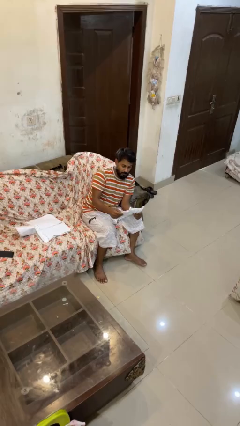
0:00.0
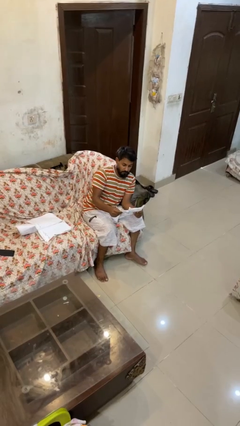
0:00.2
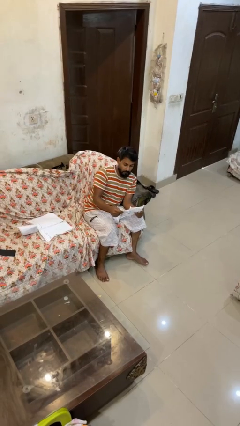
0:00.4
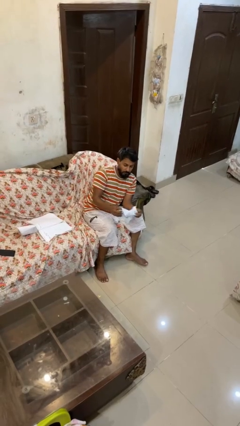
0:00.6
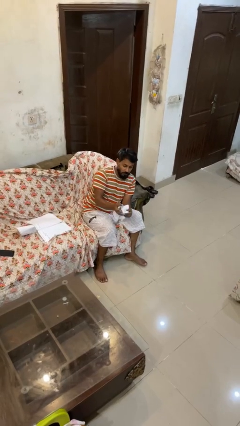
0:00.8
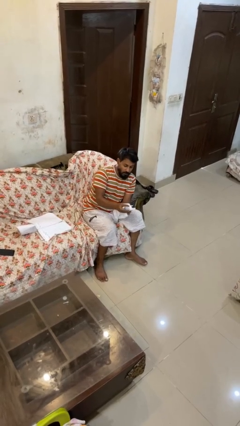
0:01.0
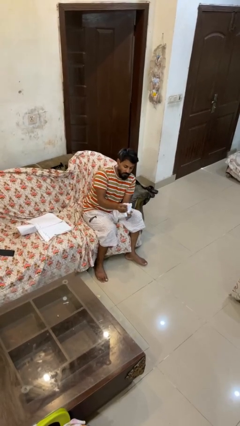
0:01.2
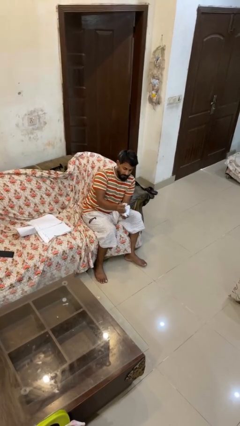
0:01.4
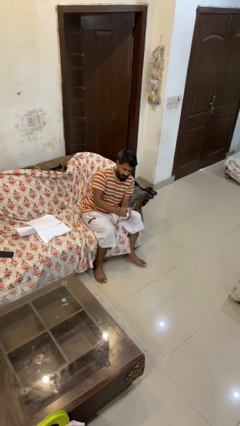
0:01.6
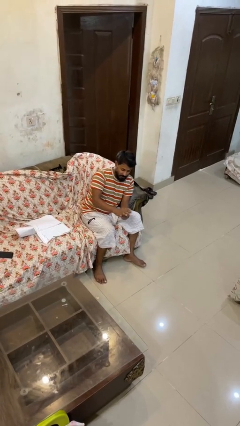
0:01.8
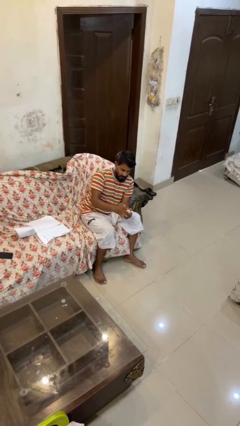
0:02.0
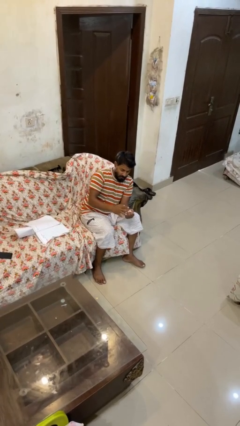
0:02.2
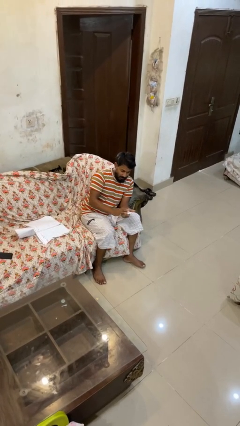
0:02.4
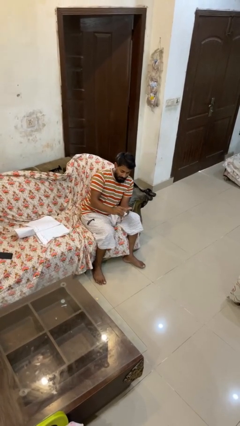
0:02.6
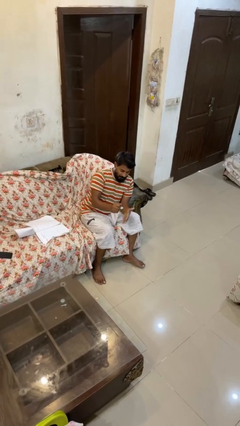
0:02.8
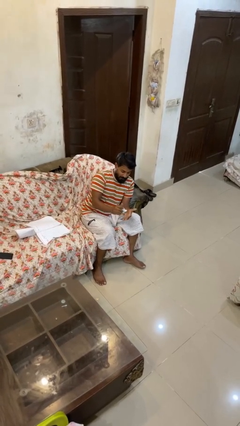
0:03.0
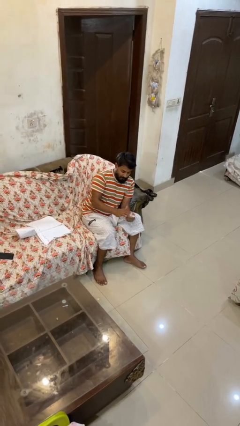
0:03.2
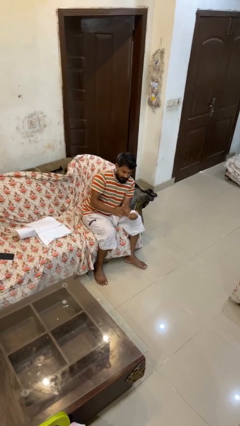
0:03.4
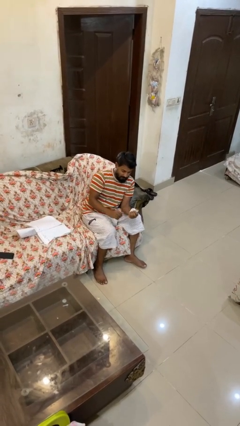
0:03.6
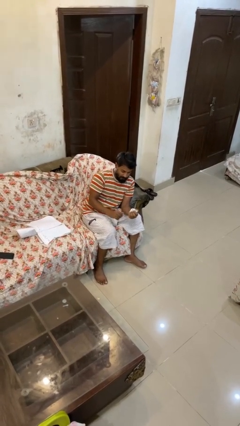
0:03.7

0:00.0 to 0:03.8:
person crumples paper

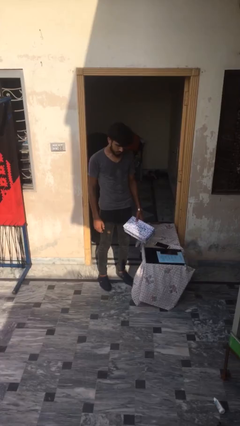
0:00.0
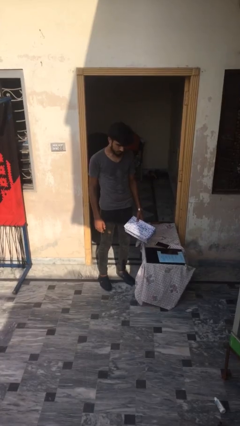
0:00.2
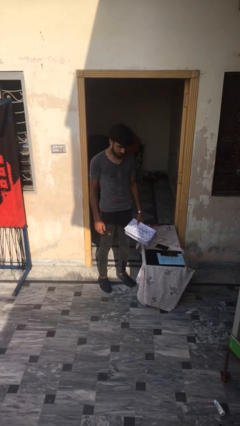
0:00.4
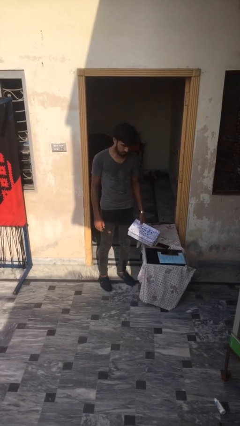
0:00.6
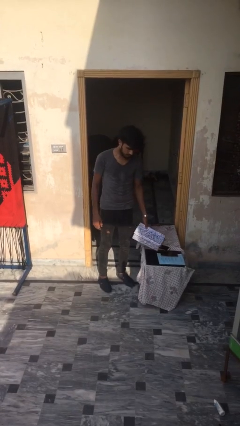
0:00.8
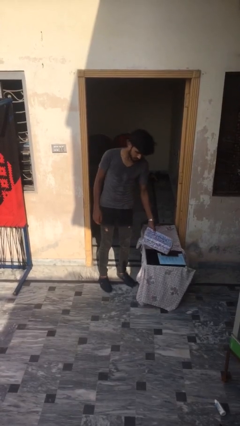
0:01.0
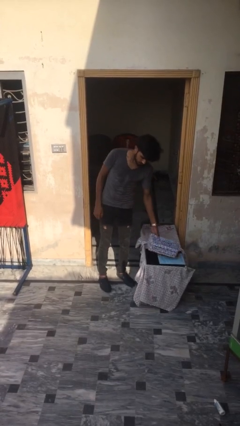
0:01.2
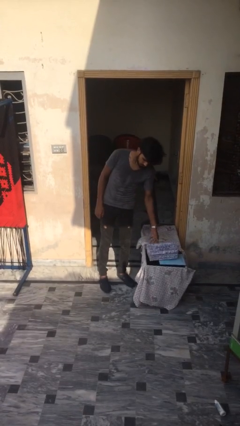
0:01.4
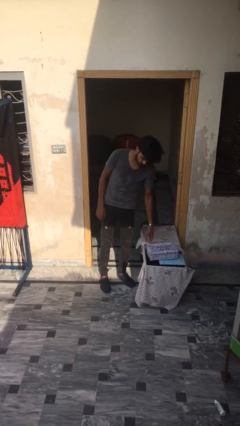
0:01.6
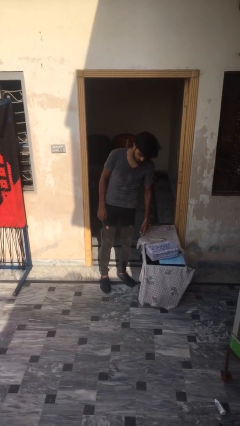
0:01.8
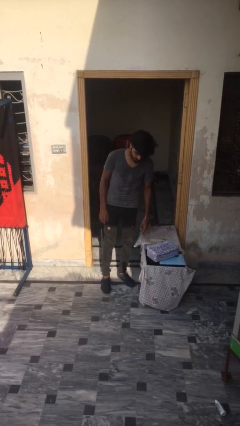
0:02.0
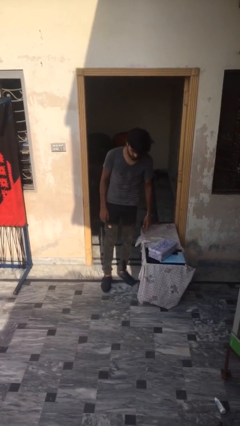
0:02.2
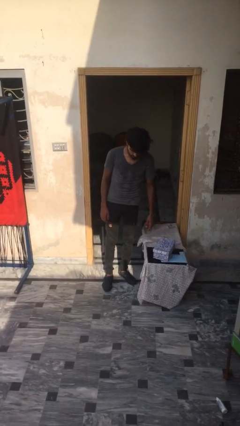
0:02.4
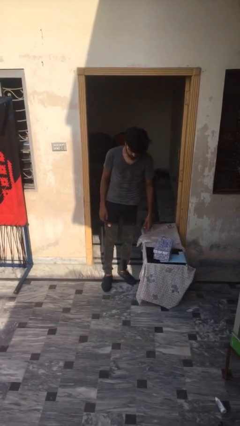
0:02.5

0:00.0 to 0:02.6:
person puts down object on table

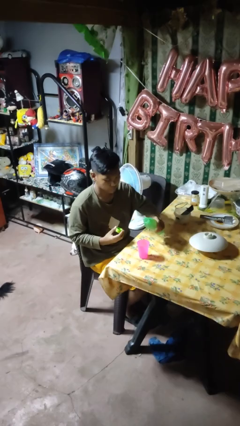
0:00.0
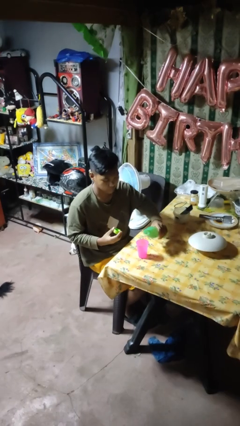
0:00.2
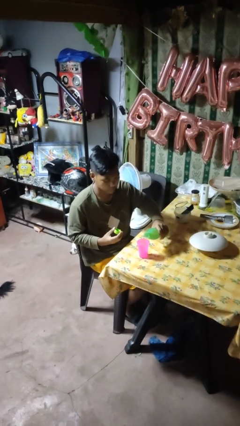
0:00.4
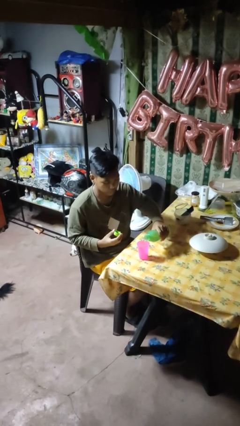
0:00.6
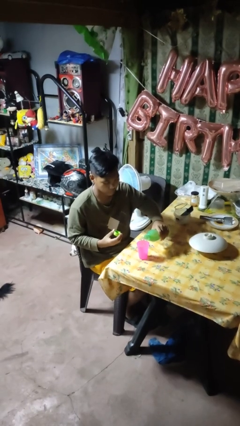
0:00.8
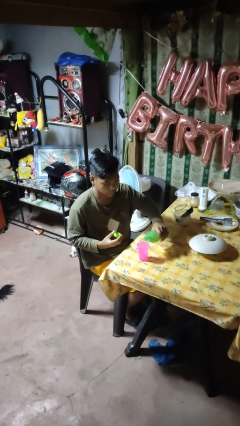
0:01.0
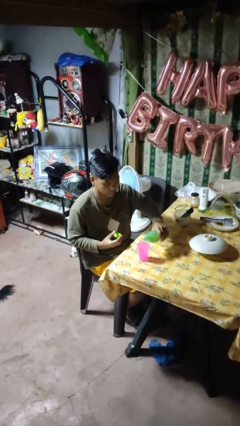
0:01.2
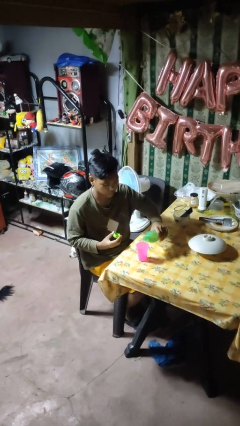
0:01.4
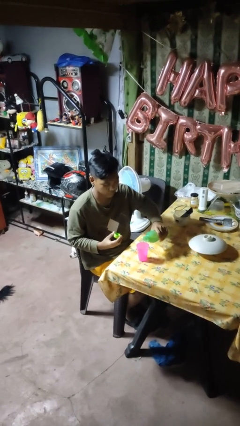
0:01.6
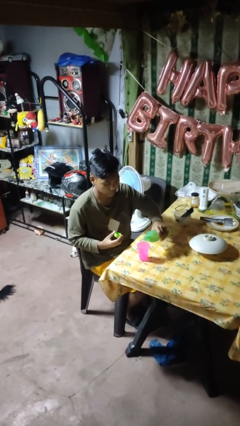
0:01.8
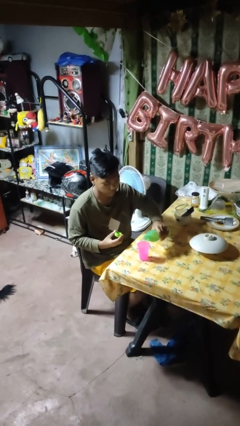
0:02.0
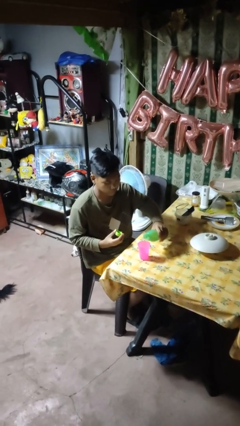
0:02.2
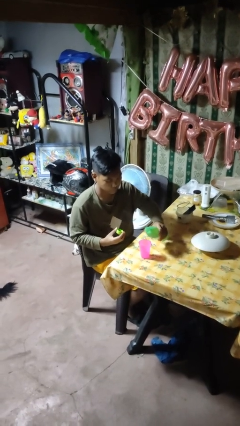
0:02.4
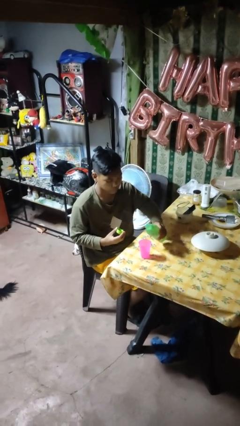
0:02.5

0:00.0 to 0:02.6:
person pours liquid into cup

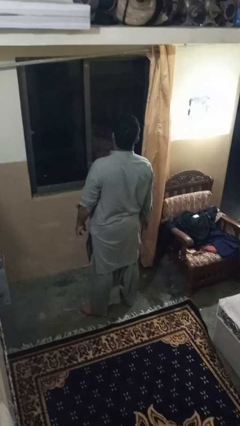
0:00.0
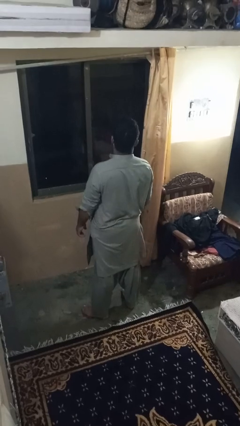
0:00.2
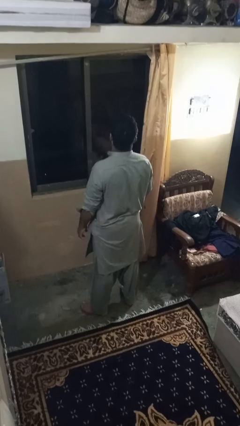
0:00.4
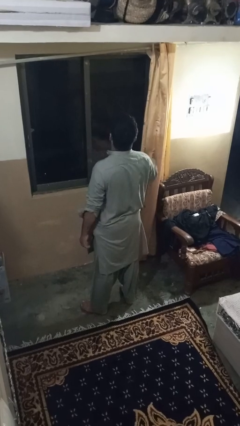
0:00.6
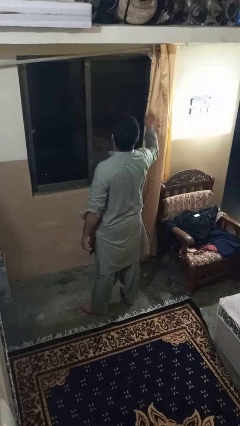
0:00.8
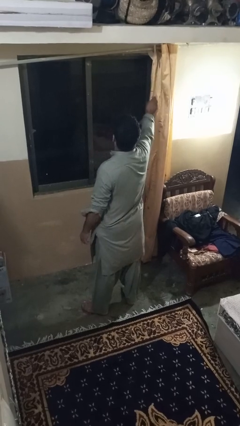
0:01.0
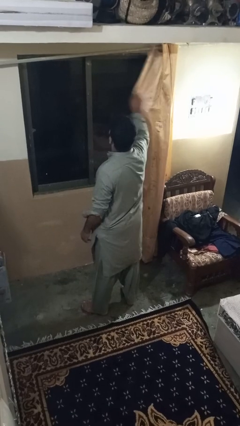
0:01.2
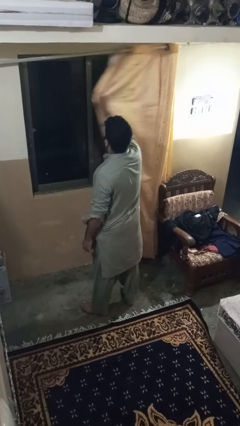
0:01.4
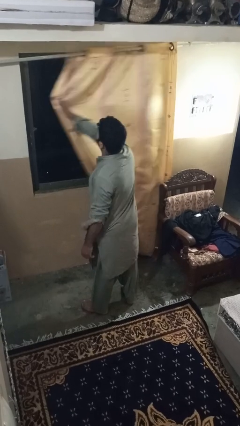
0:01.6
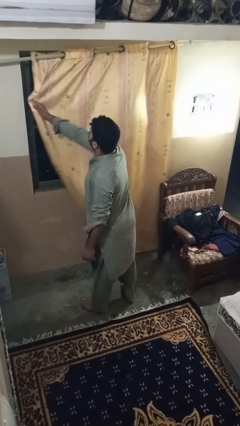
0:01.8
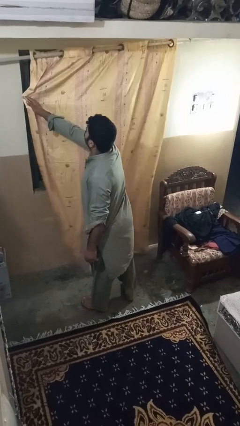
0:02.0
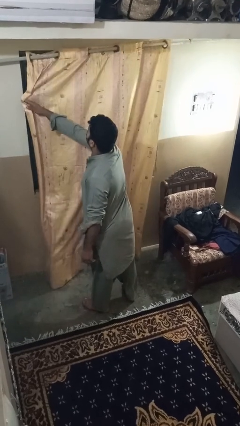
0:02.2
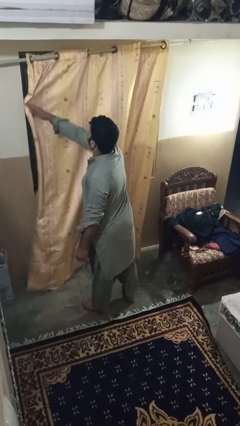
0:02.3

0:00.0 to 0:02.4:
person closes curtains

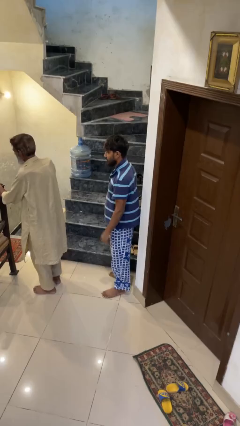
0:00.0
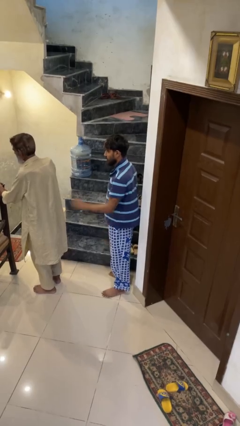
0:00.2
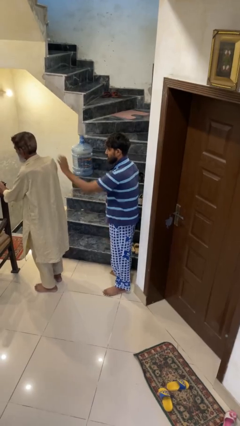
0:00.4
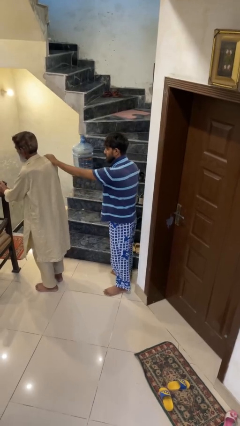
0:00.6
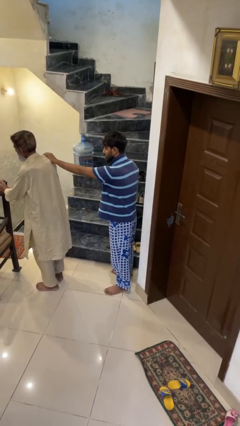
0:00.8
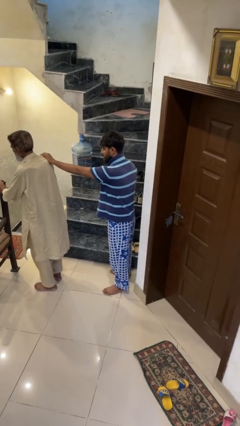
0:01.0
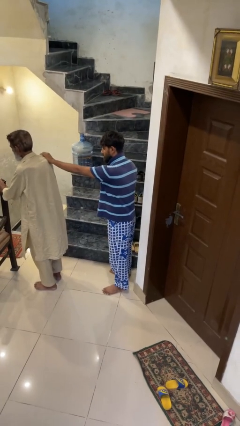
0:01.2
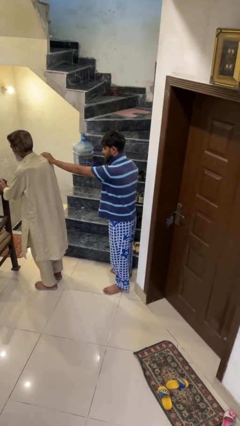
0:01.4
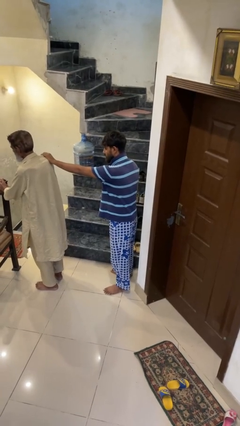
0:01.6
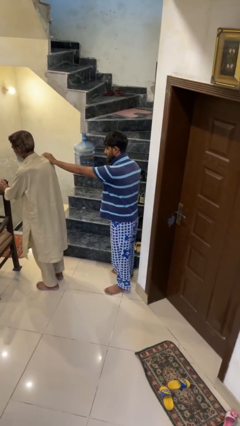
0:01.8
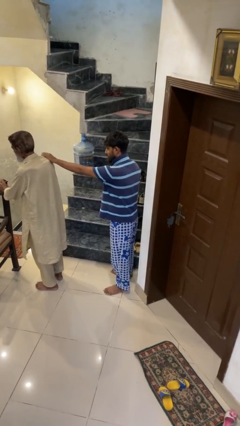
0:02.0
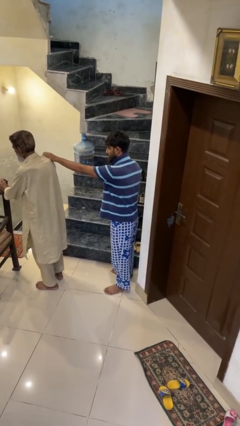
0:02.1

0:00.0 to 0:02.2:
person grabs person by shoulder

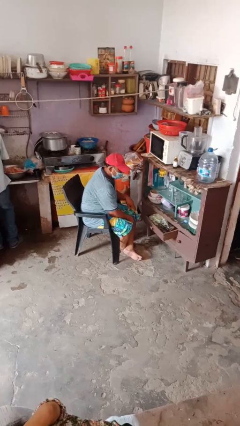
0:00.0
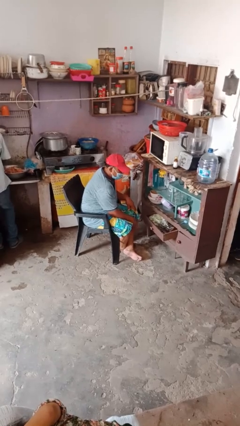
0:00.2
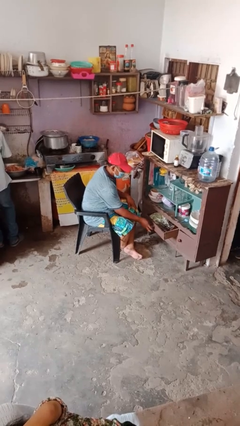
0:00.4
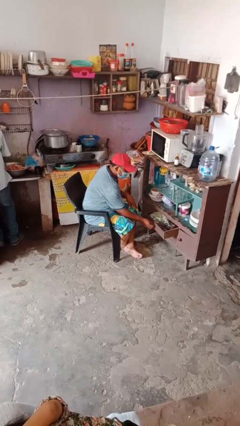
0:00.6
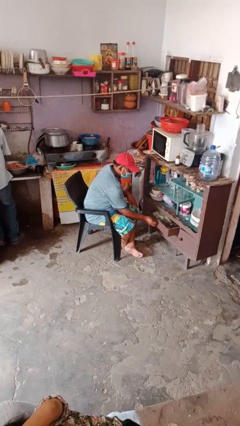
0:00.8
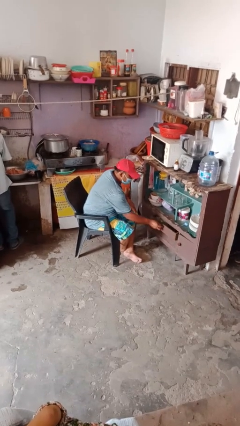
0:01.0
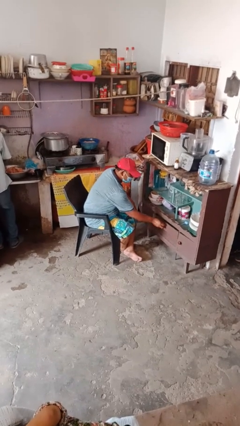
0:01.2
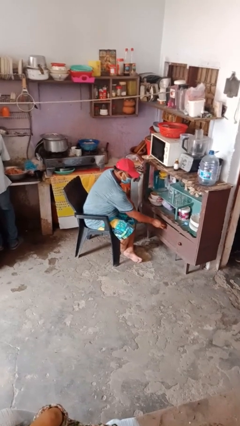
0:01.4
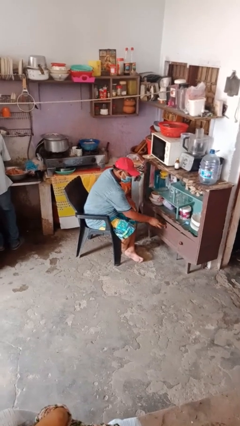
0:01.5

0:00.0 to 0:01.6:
person closes dresser drawer

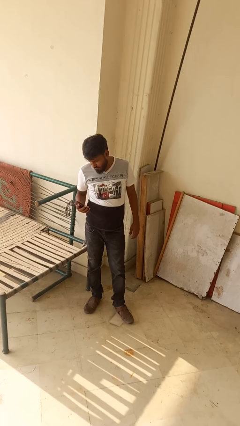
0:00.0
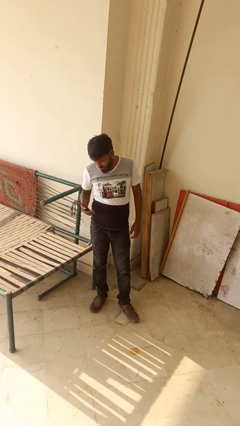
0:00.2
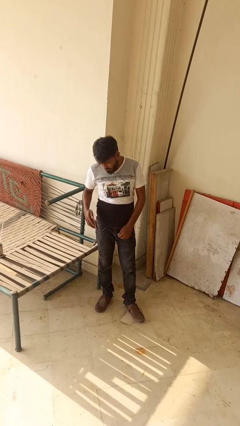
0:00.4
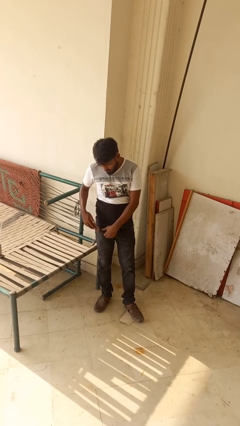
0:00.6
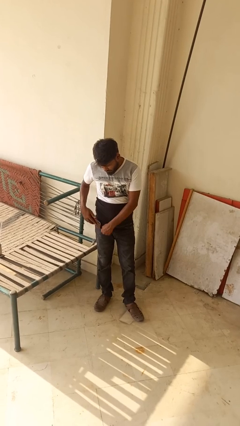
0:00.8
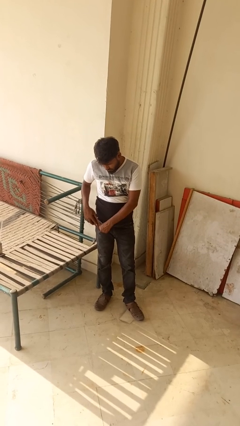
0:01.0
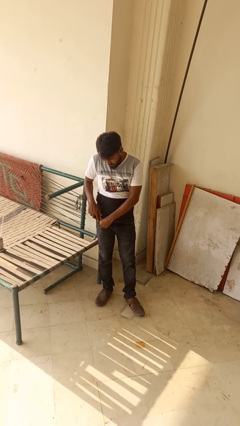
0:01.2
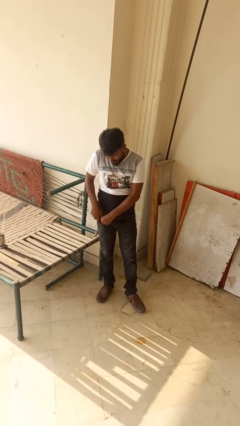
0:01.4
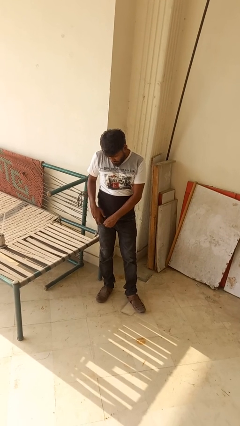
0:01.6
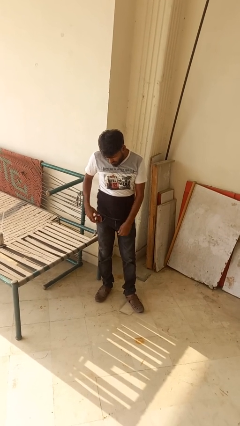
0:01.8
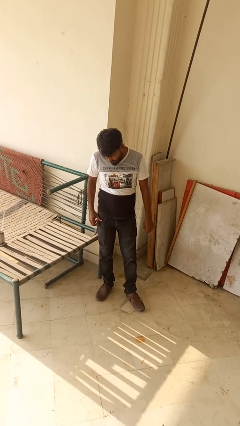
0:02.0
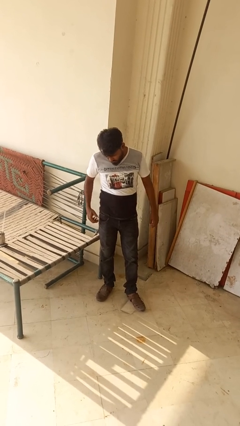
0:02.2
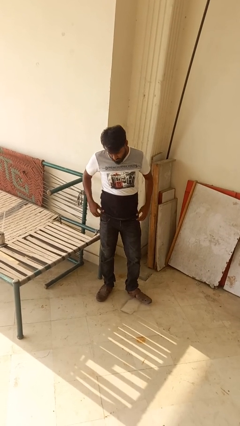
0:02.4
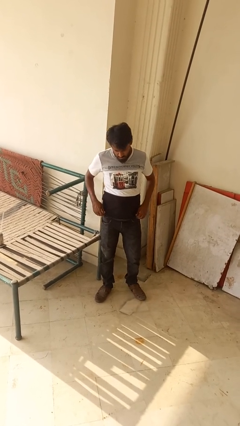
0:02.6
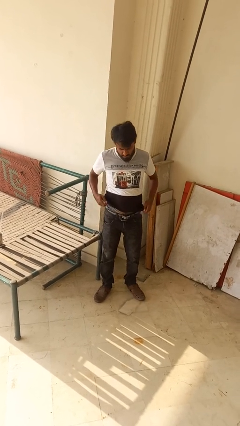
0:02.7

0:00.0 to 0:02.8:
person puts phone into pocket
